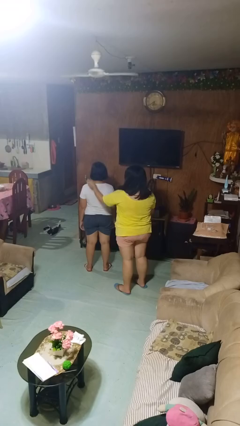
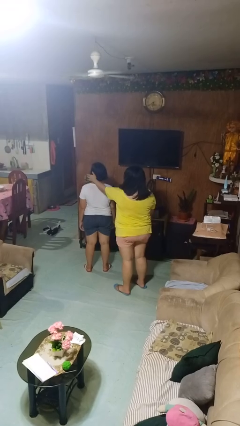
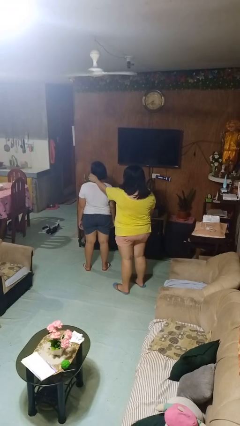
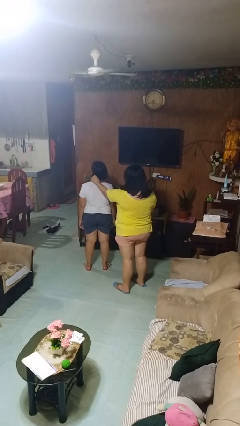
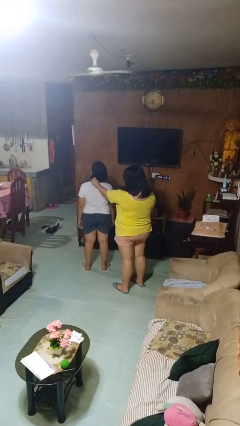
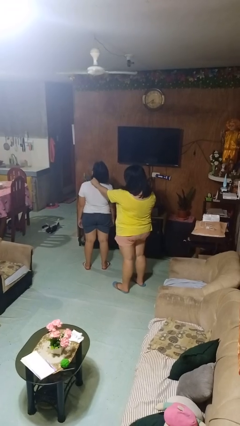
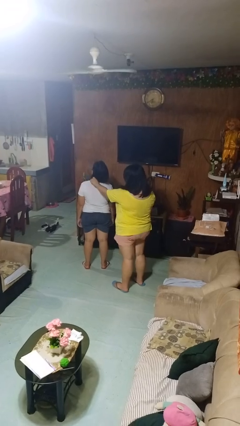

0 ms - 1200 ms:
person grabs person by hair

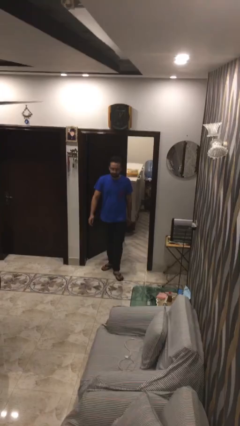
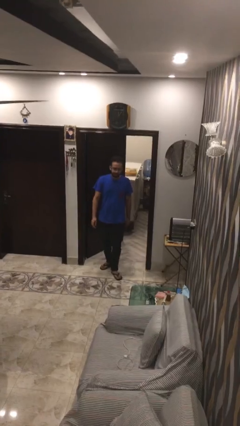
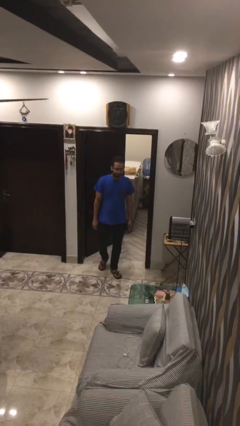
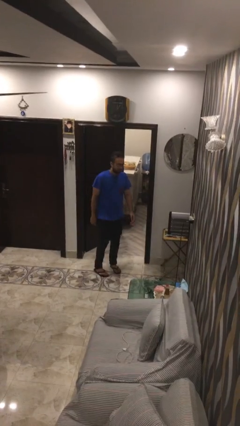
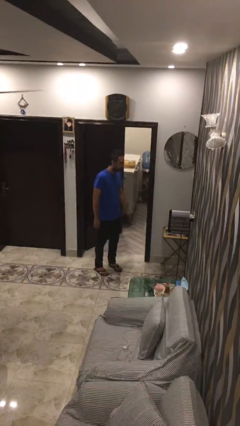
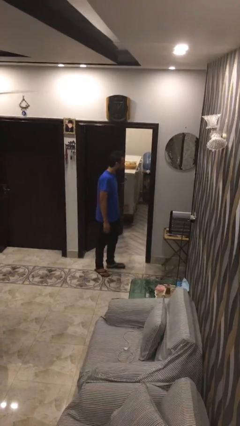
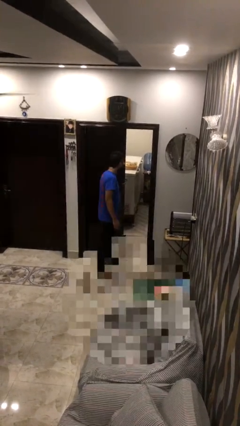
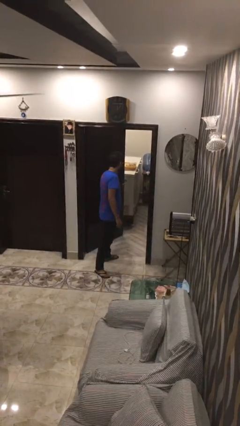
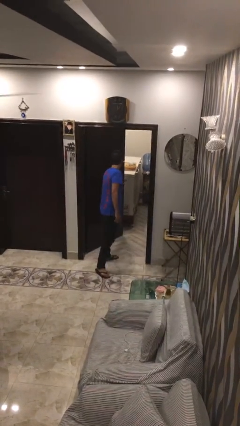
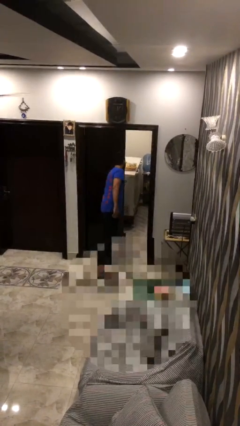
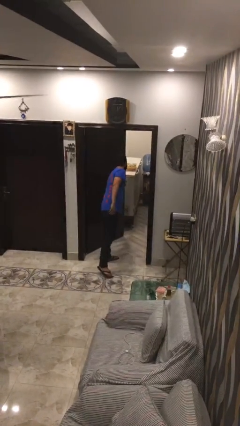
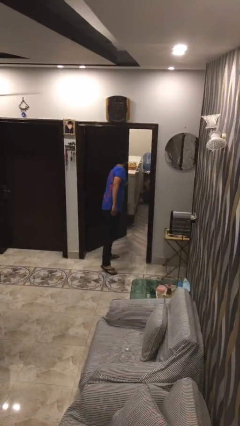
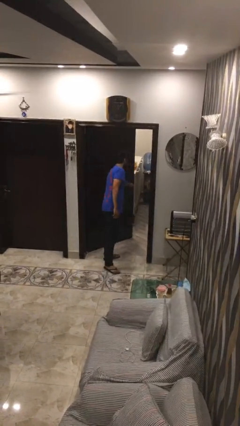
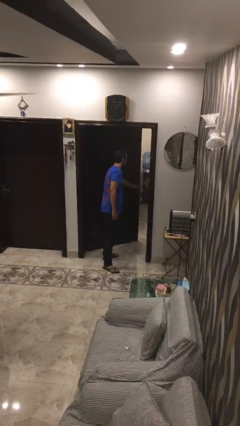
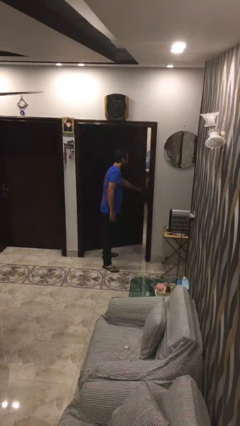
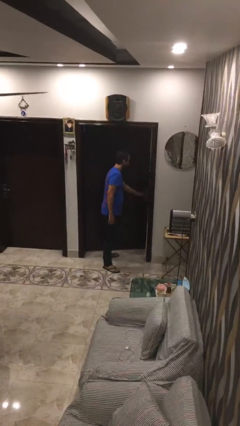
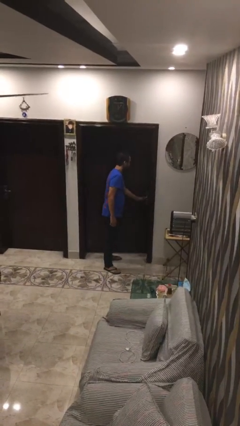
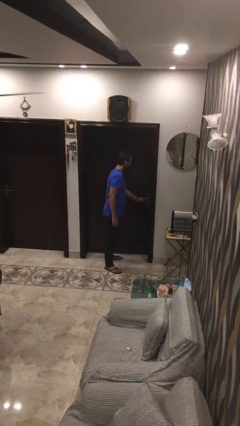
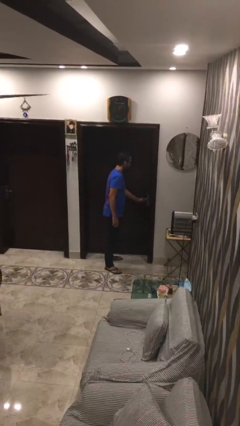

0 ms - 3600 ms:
person closes facility door

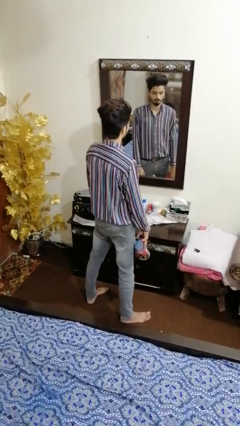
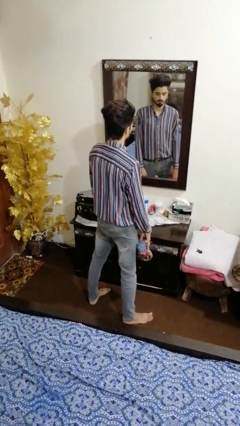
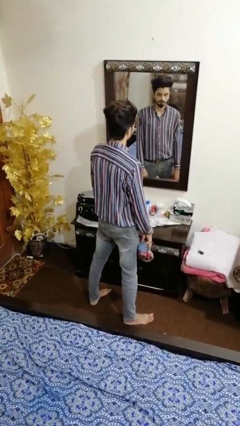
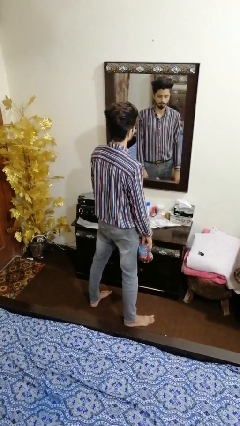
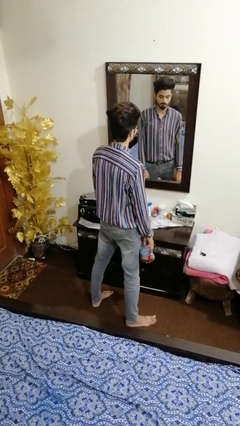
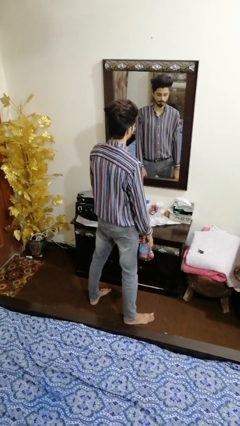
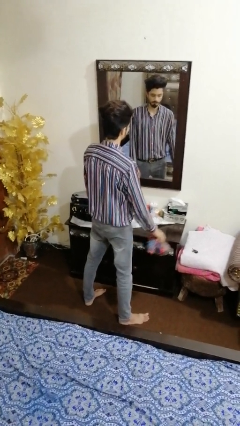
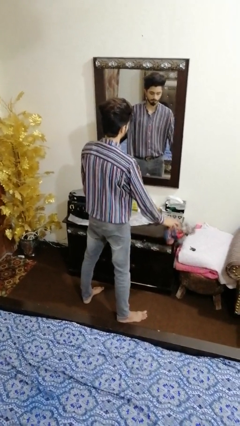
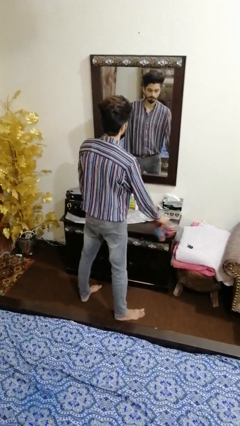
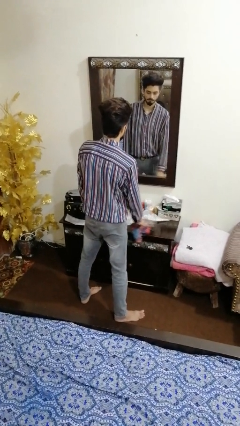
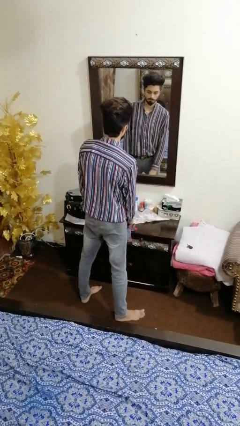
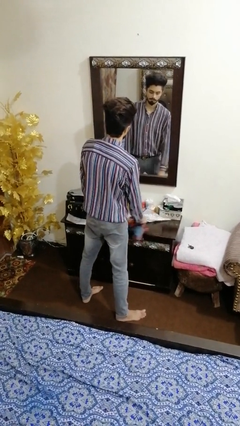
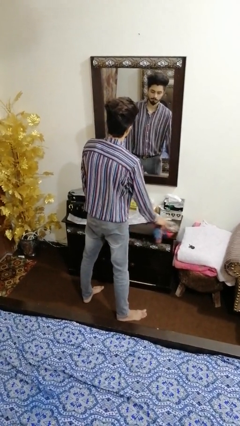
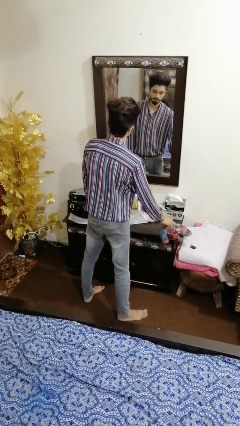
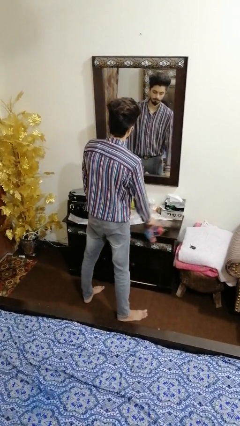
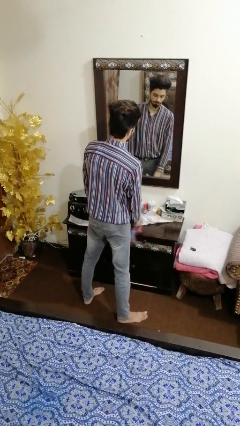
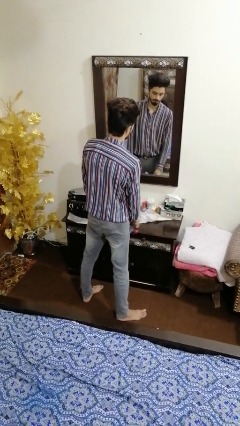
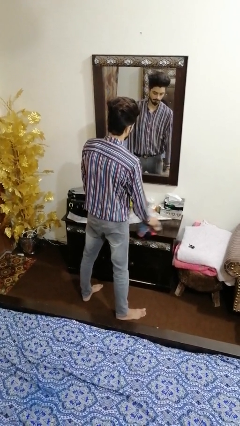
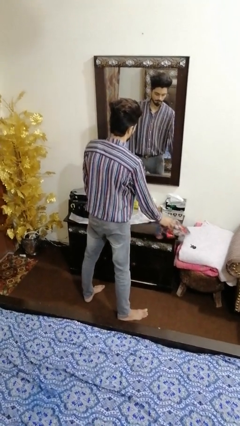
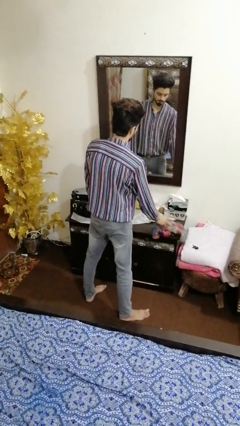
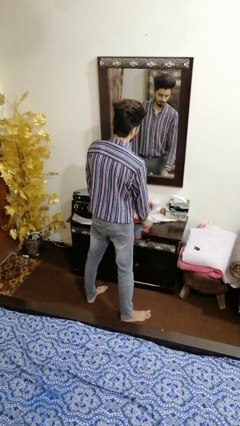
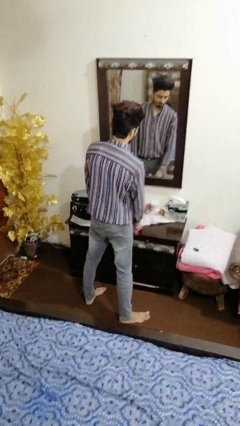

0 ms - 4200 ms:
person cleans table with rag

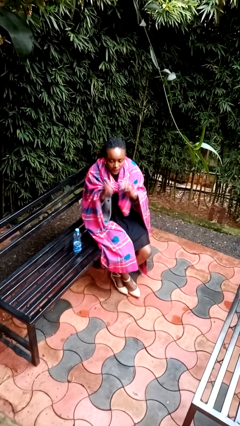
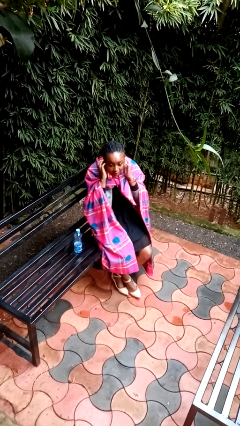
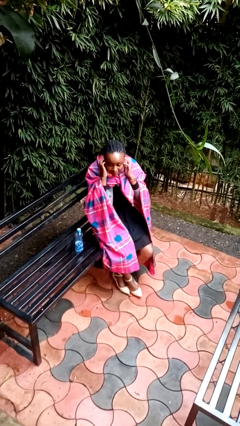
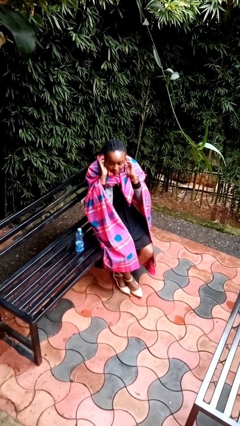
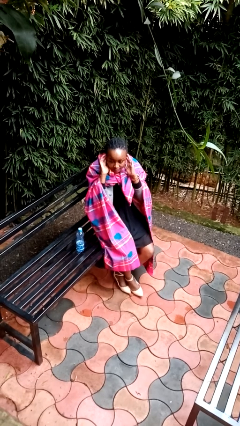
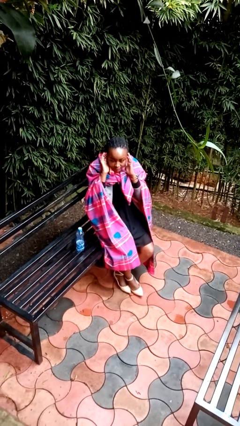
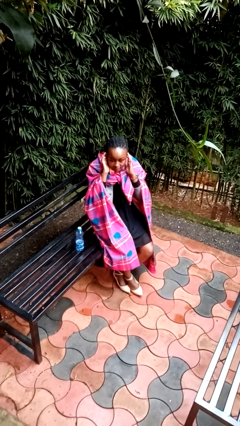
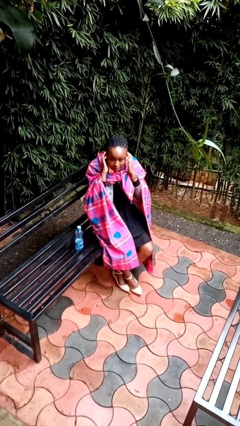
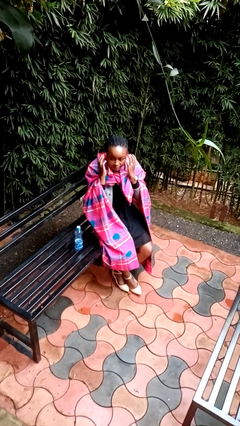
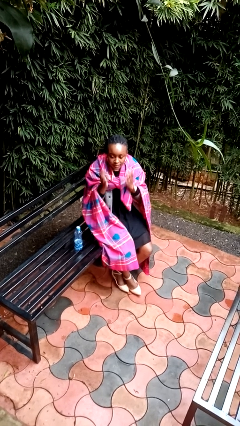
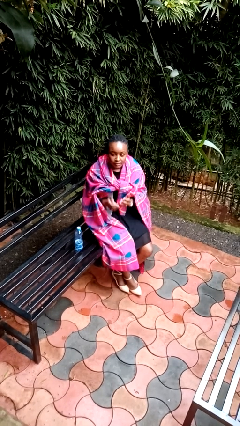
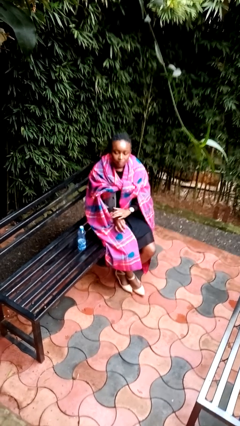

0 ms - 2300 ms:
person puts fingers in ear

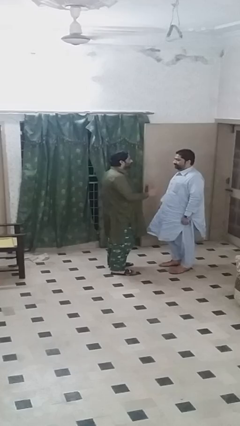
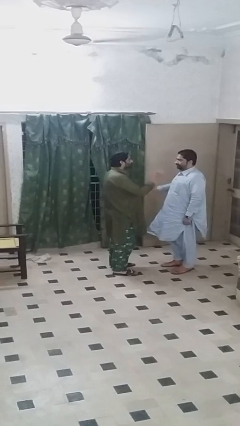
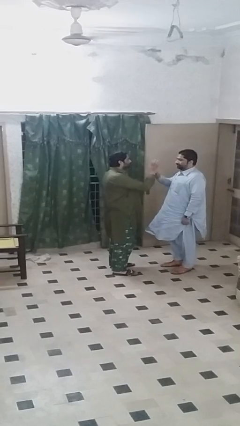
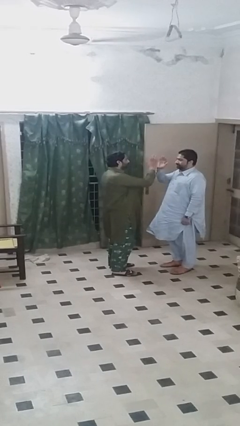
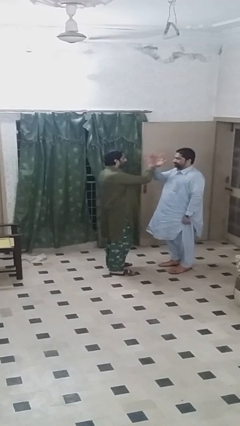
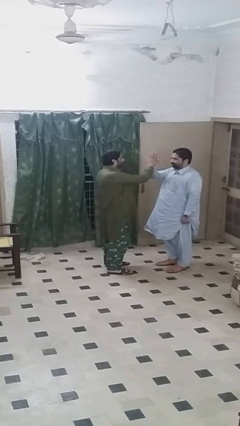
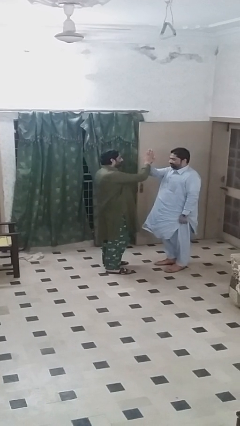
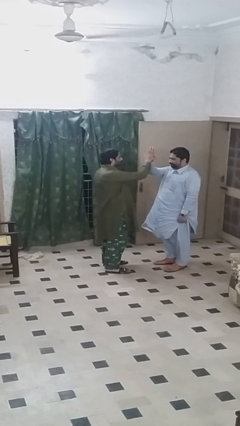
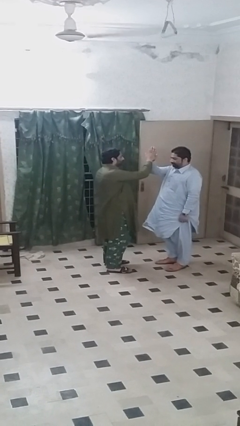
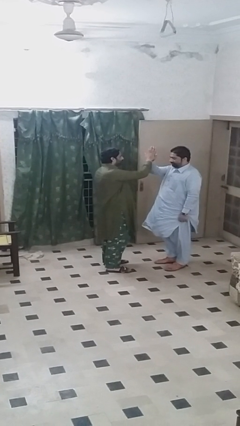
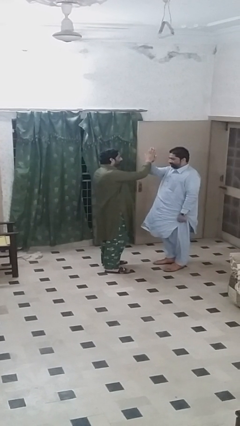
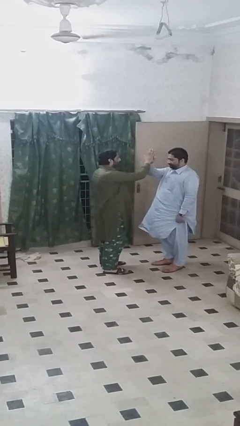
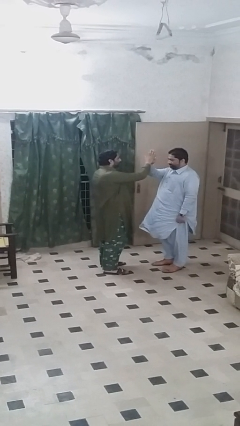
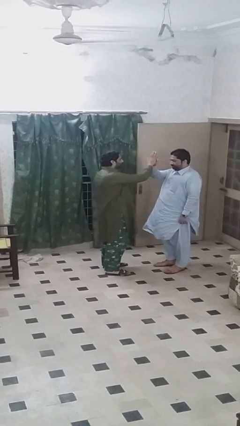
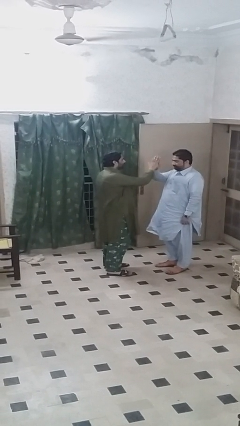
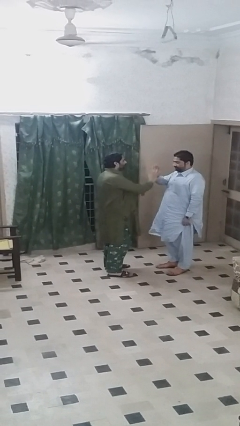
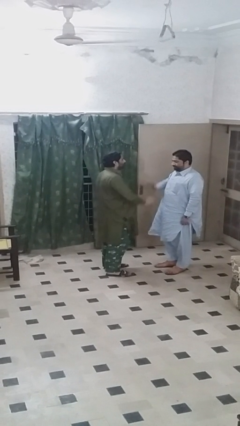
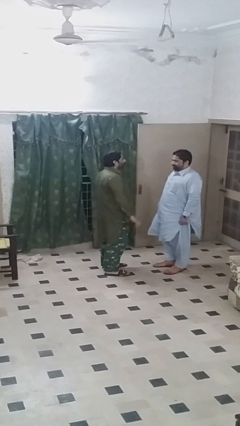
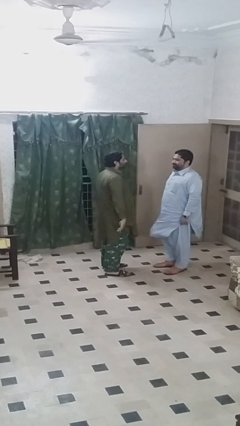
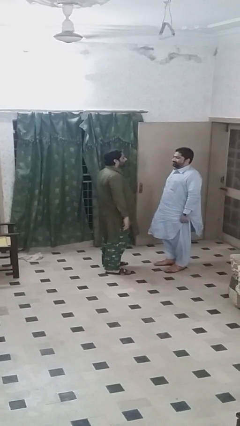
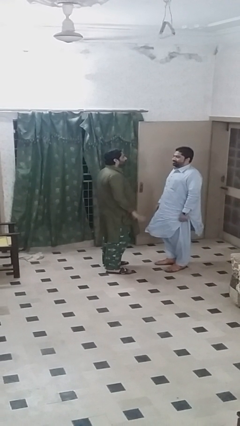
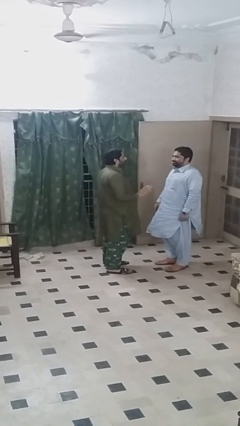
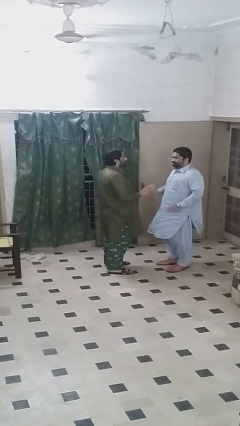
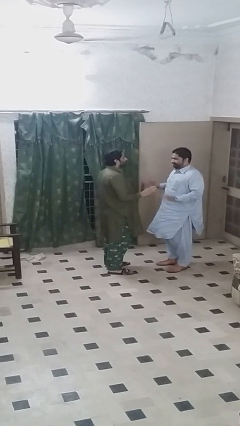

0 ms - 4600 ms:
person highfives hand

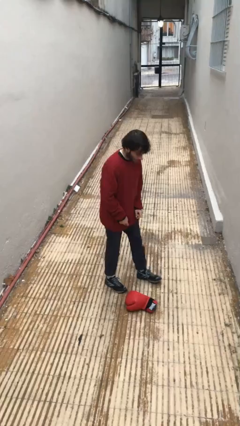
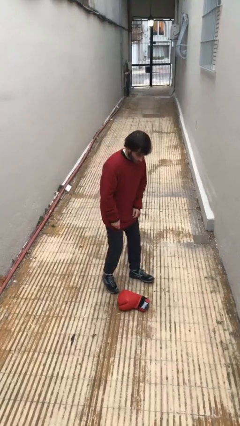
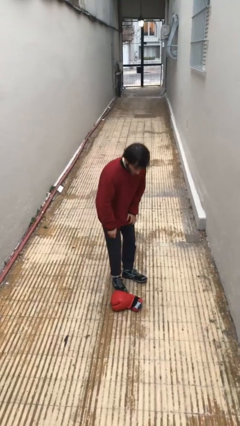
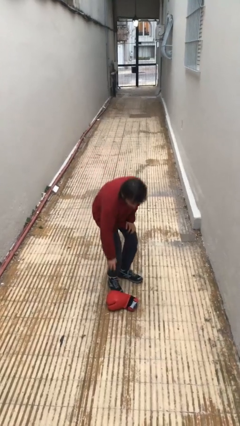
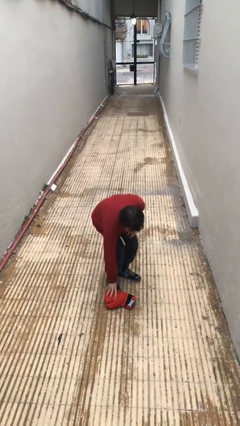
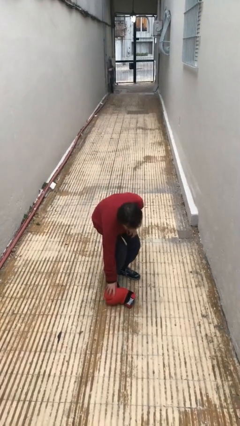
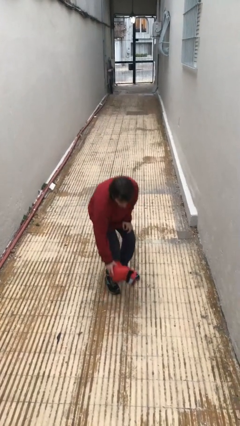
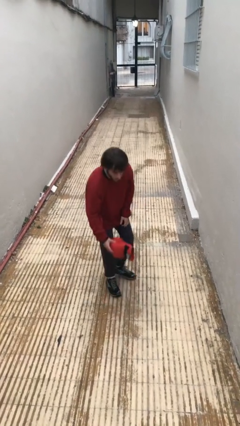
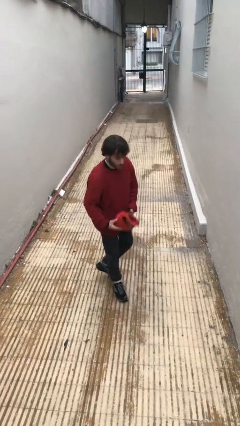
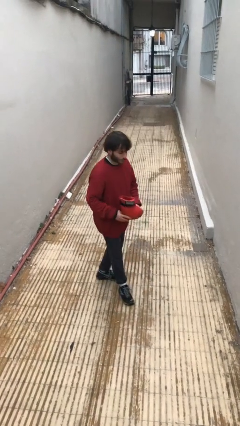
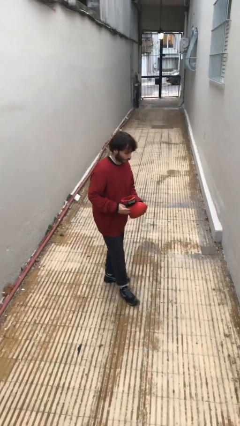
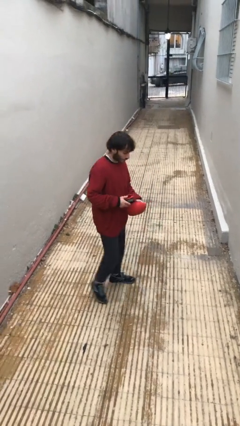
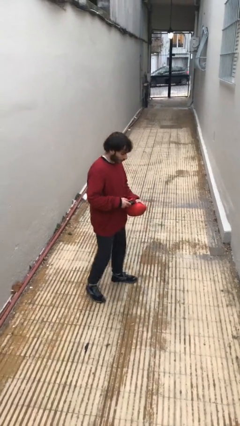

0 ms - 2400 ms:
person picks up object from floor
